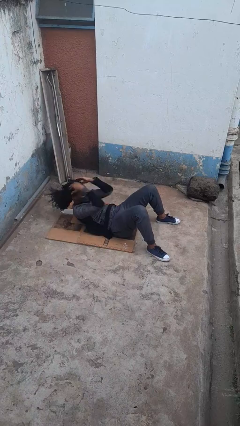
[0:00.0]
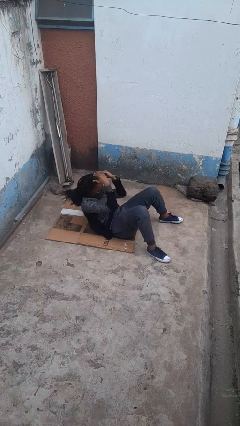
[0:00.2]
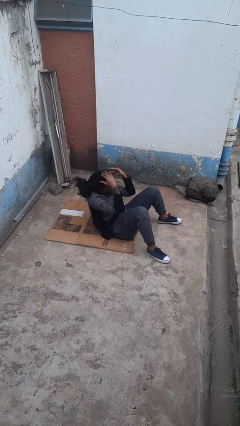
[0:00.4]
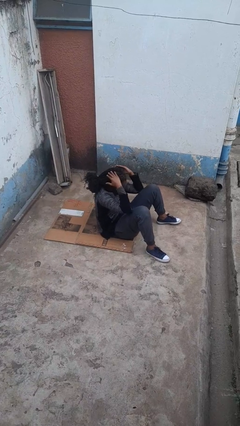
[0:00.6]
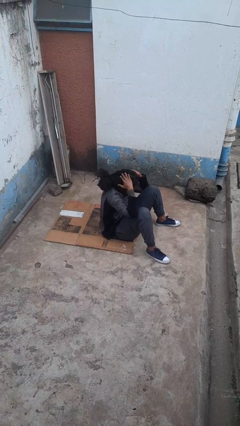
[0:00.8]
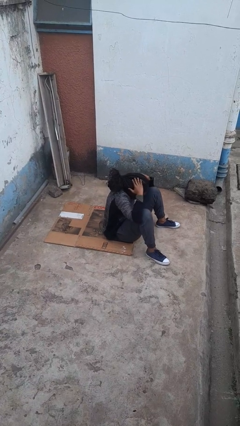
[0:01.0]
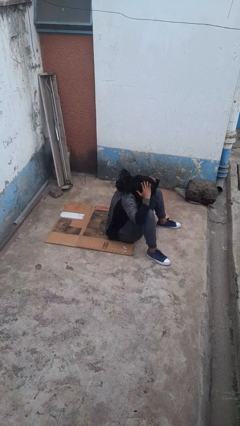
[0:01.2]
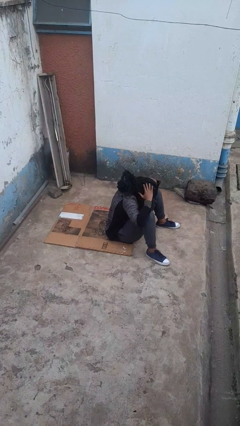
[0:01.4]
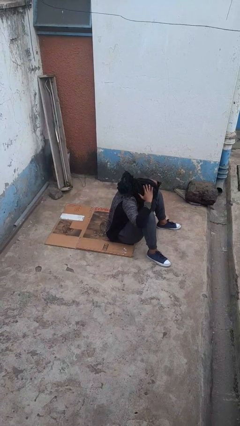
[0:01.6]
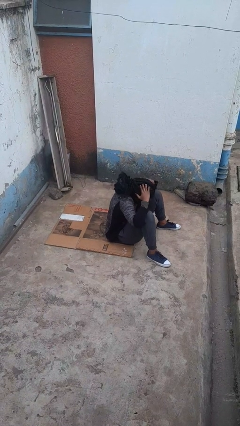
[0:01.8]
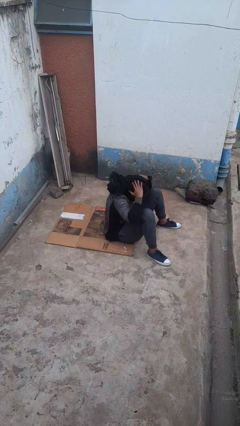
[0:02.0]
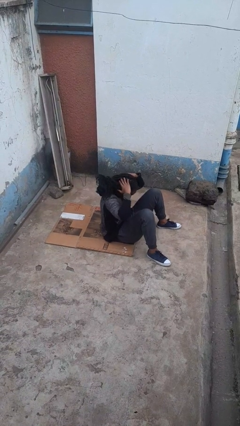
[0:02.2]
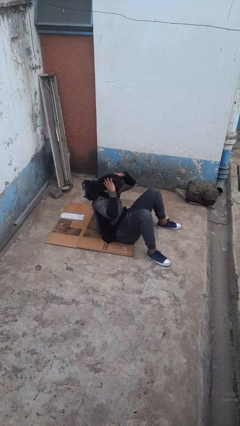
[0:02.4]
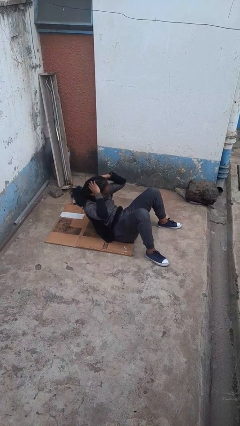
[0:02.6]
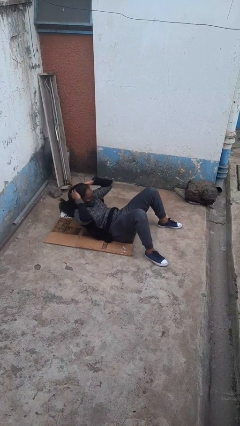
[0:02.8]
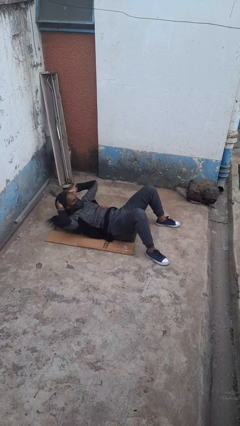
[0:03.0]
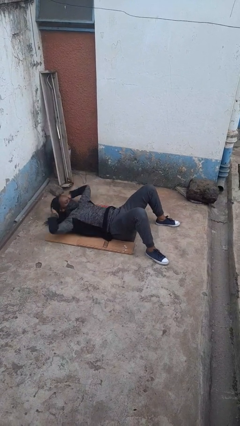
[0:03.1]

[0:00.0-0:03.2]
person exercises with situp

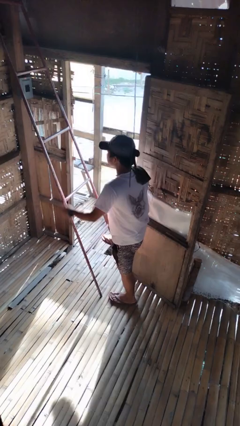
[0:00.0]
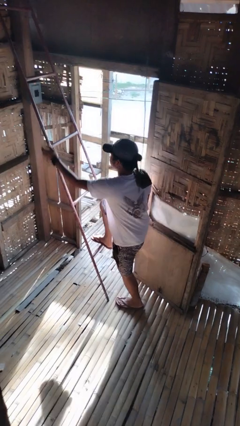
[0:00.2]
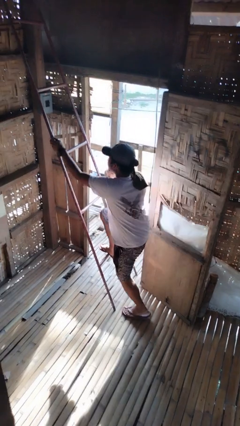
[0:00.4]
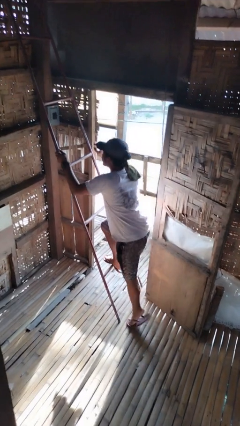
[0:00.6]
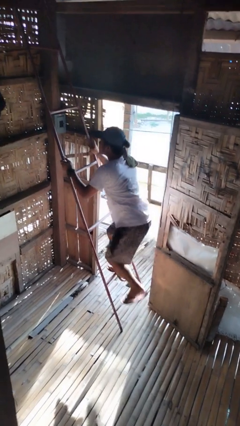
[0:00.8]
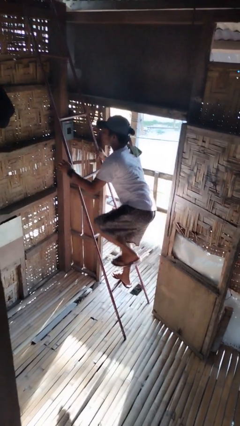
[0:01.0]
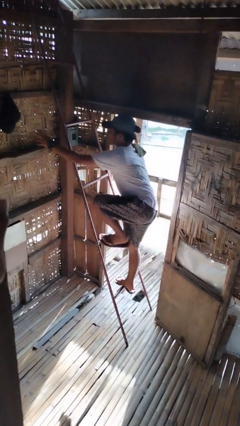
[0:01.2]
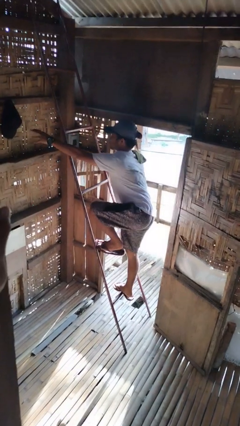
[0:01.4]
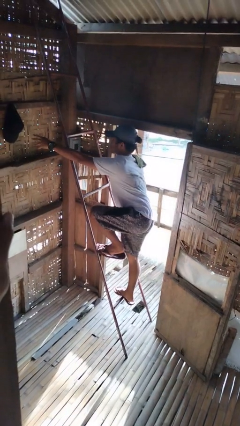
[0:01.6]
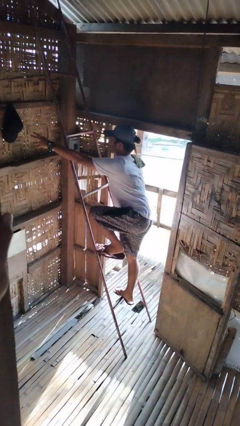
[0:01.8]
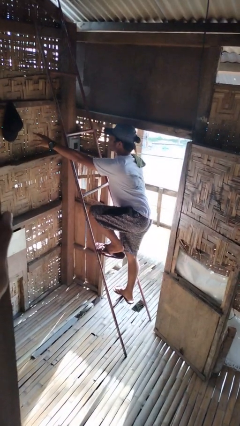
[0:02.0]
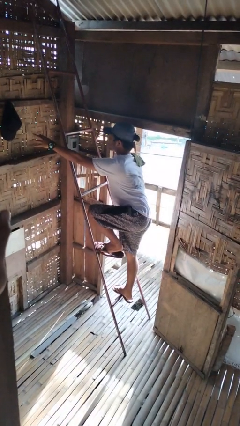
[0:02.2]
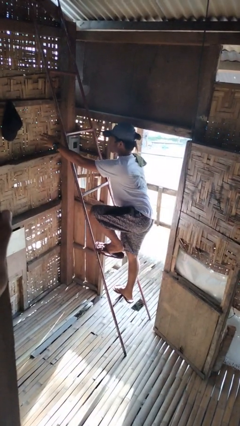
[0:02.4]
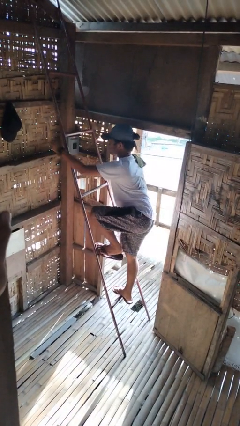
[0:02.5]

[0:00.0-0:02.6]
person climbs up ladder

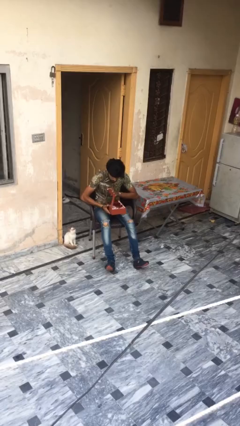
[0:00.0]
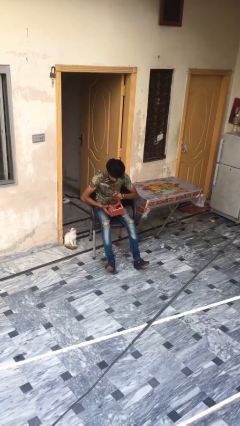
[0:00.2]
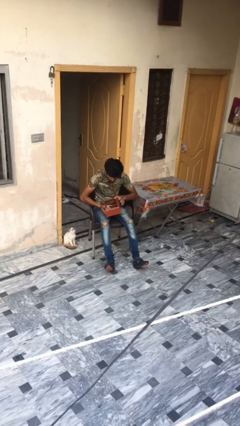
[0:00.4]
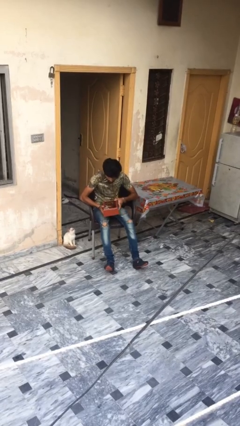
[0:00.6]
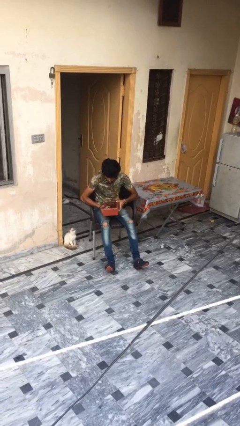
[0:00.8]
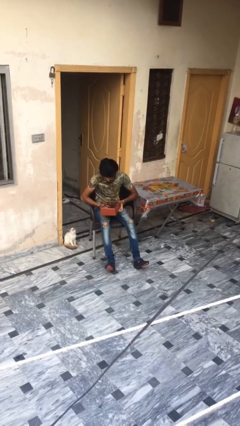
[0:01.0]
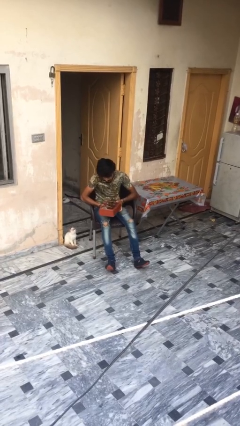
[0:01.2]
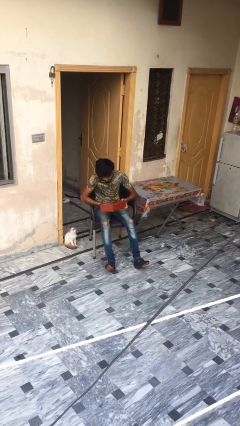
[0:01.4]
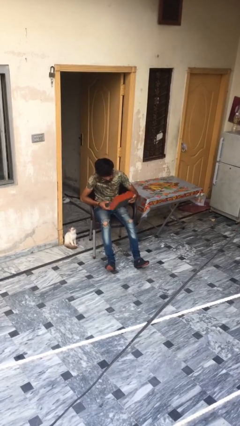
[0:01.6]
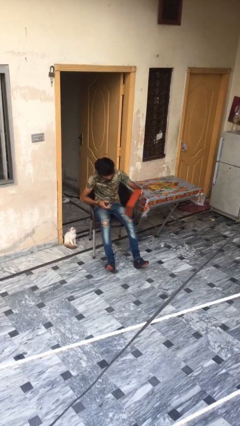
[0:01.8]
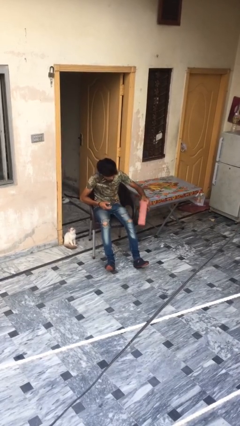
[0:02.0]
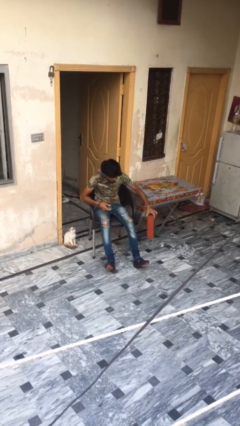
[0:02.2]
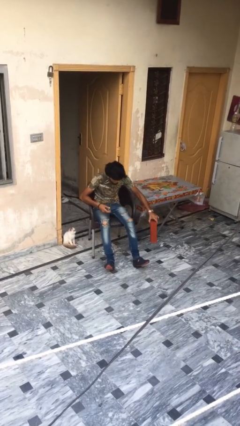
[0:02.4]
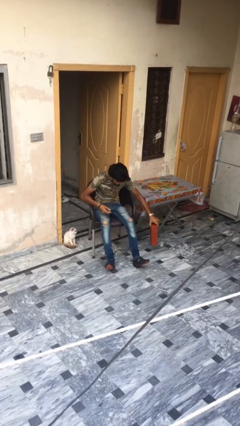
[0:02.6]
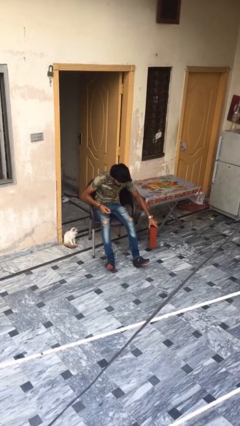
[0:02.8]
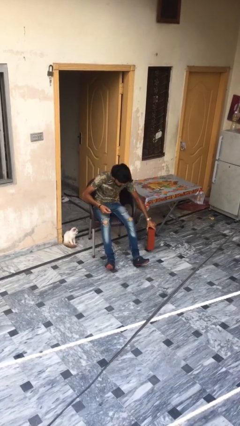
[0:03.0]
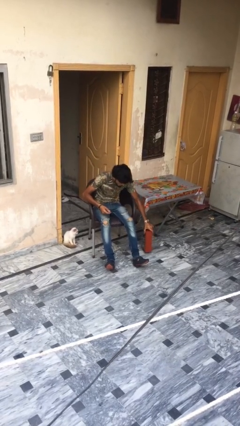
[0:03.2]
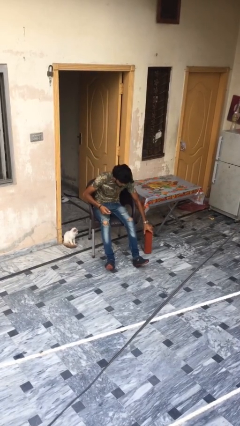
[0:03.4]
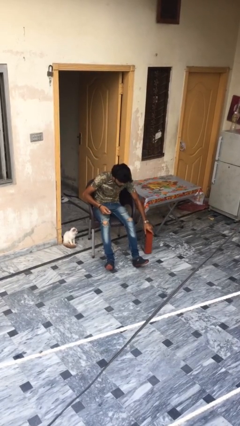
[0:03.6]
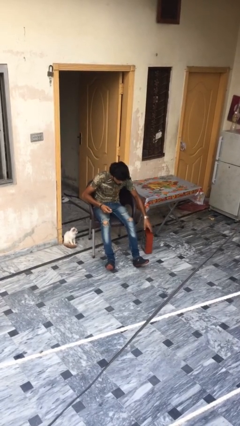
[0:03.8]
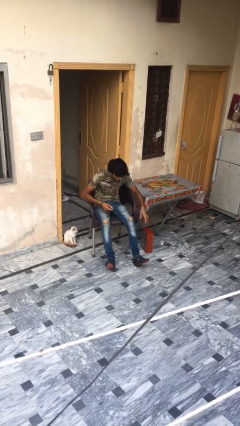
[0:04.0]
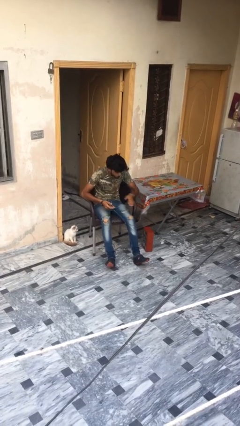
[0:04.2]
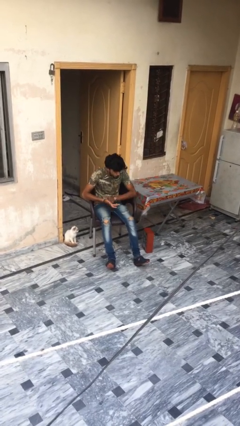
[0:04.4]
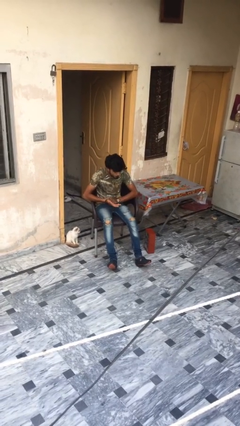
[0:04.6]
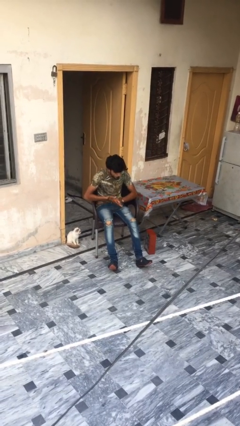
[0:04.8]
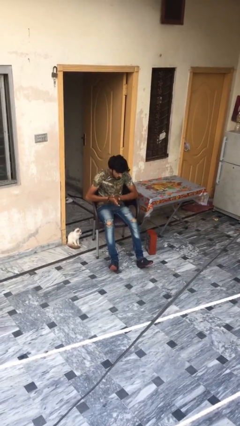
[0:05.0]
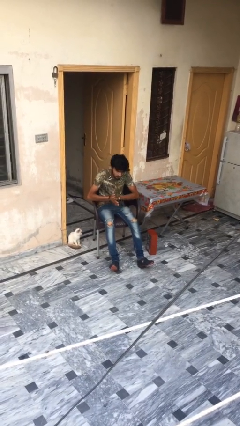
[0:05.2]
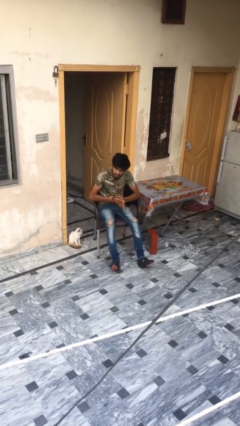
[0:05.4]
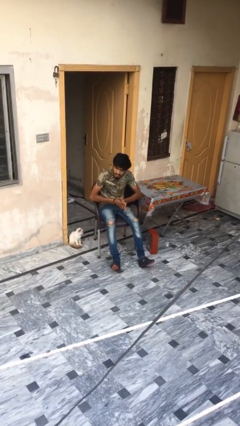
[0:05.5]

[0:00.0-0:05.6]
person puts down object on floor

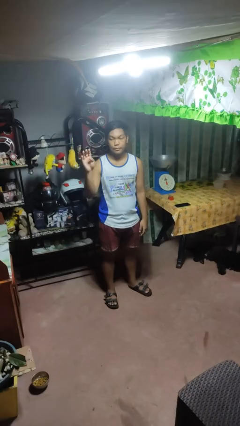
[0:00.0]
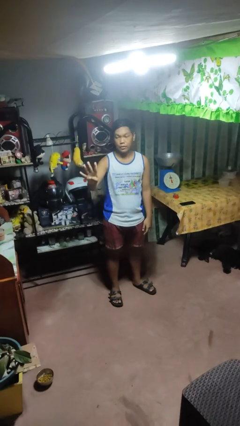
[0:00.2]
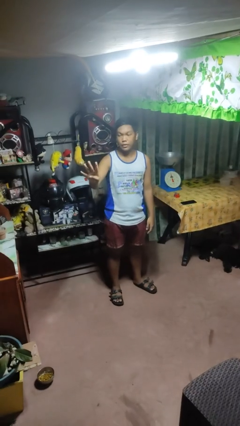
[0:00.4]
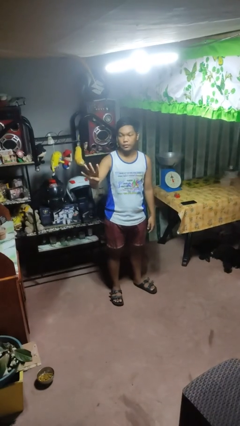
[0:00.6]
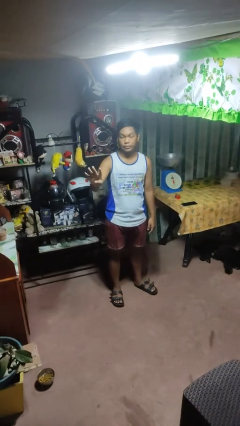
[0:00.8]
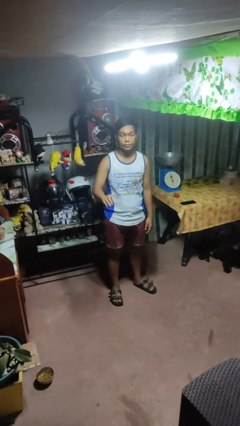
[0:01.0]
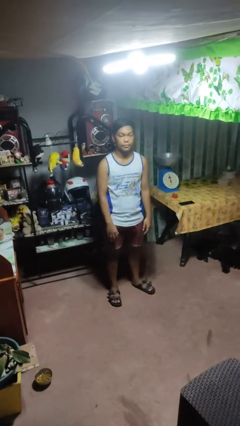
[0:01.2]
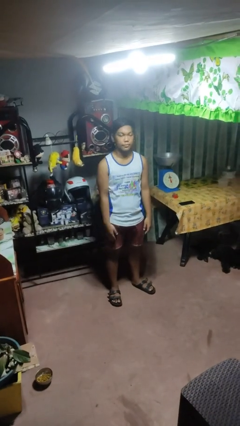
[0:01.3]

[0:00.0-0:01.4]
person gestures number four

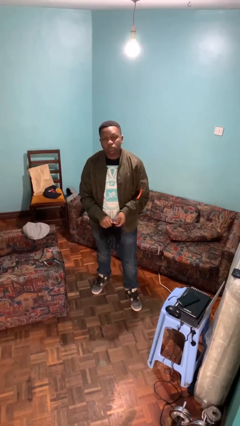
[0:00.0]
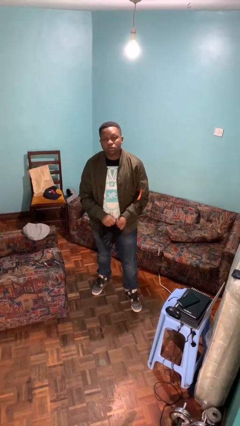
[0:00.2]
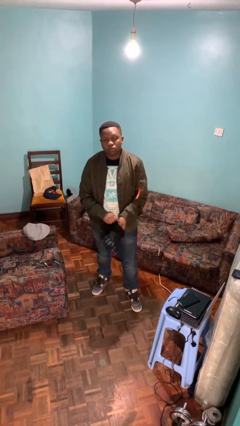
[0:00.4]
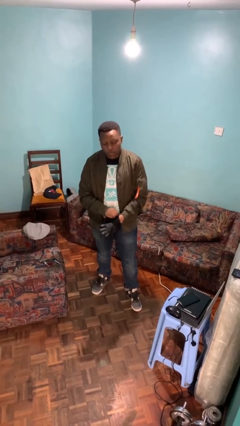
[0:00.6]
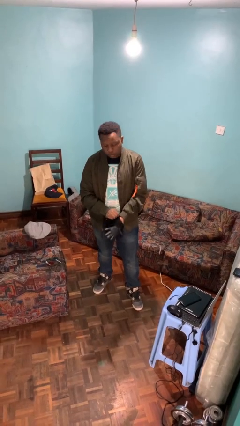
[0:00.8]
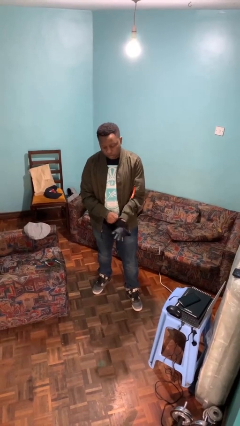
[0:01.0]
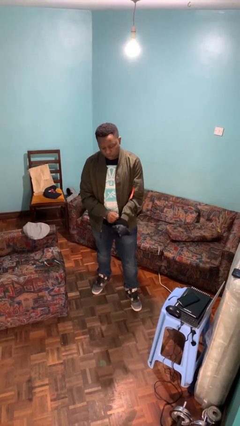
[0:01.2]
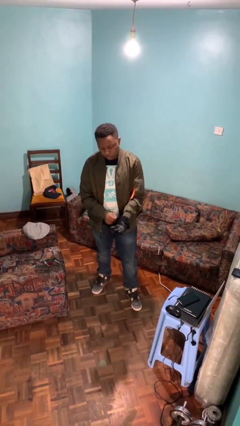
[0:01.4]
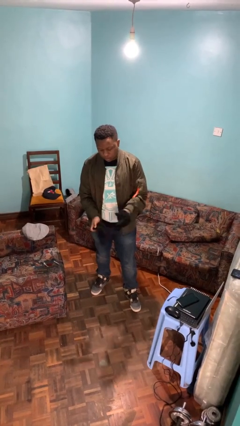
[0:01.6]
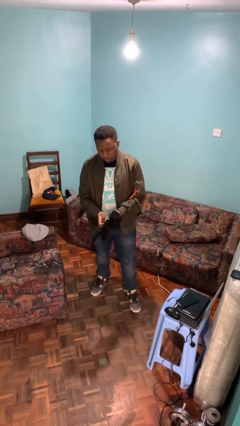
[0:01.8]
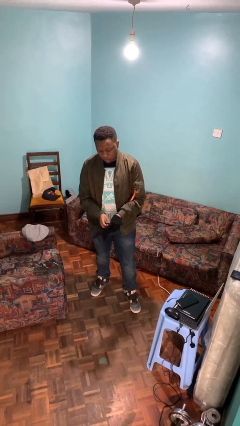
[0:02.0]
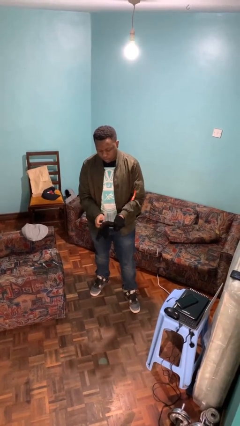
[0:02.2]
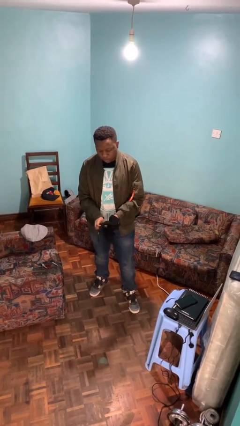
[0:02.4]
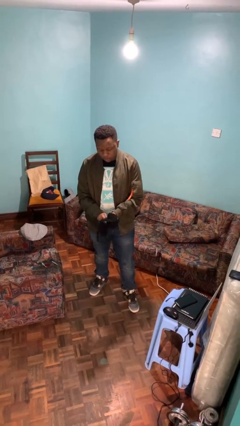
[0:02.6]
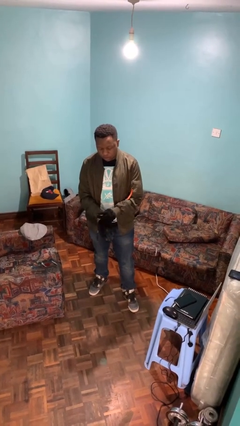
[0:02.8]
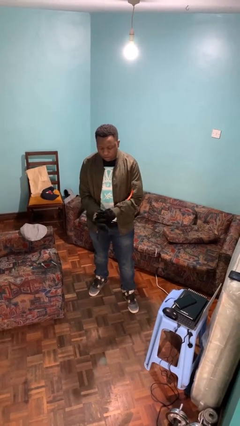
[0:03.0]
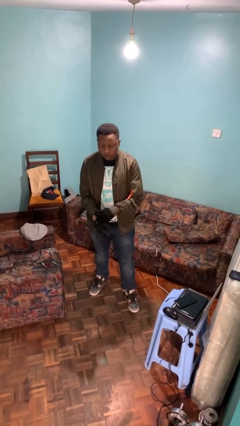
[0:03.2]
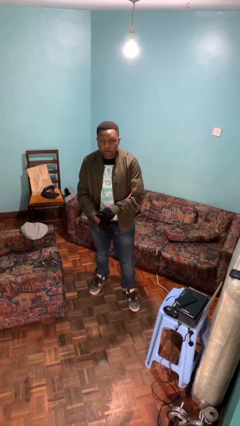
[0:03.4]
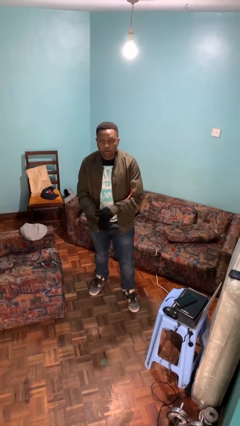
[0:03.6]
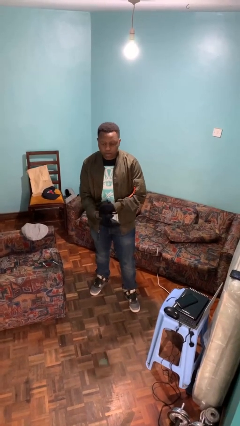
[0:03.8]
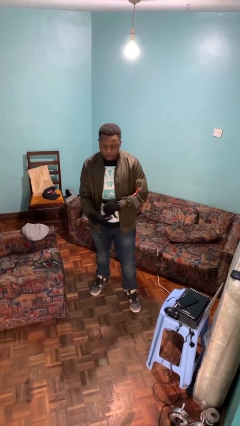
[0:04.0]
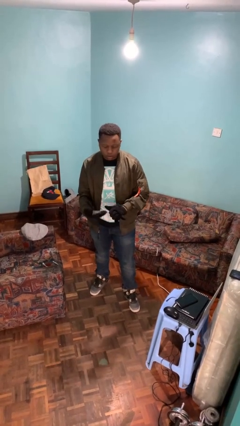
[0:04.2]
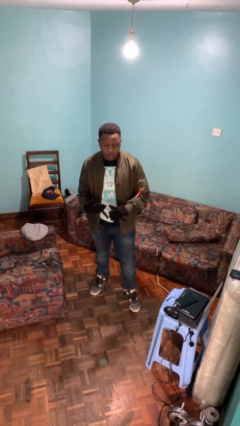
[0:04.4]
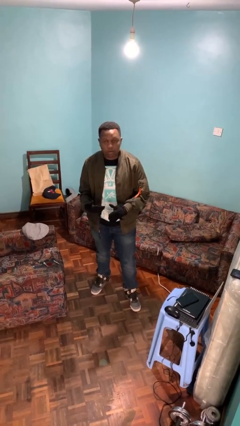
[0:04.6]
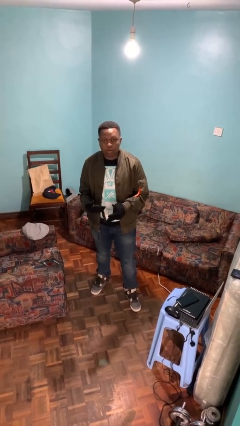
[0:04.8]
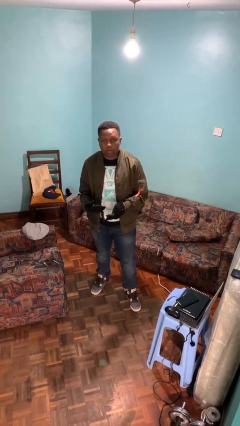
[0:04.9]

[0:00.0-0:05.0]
person puts on gloves
